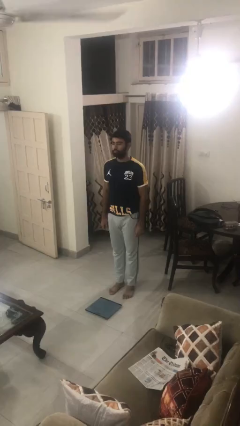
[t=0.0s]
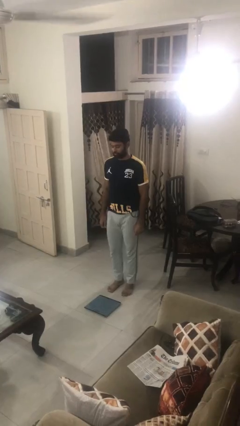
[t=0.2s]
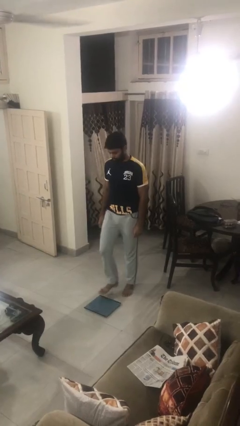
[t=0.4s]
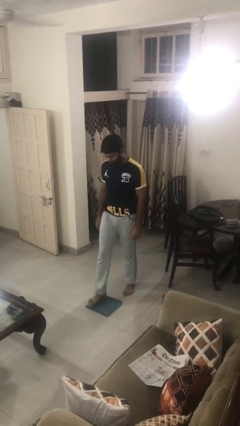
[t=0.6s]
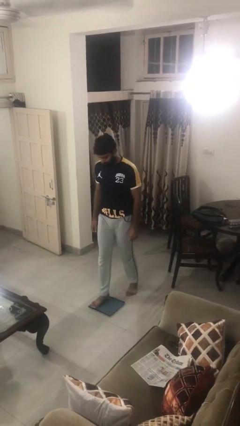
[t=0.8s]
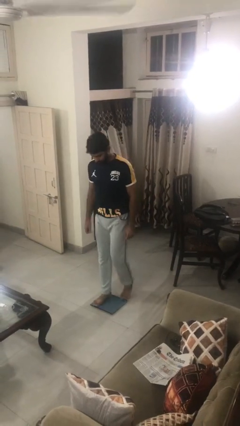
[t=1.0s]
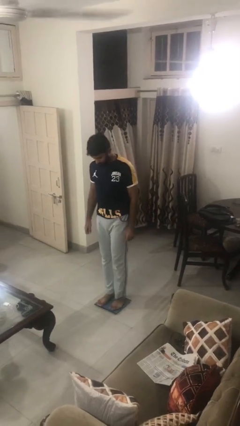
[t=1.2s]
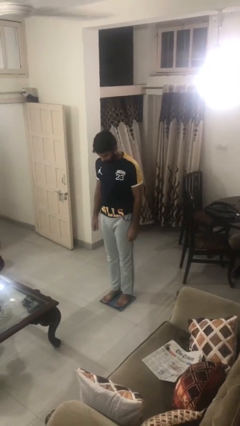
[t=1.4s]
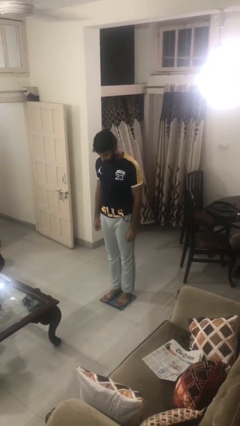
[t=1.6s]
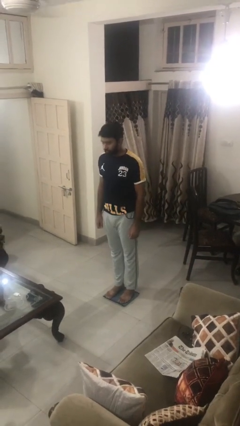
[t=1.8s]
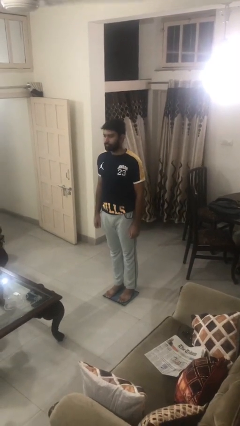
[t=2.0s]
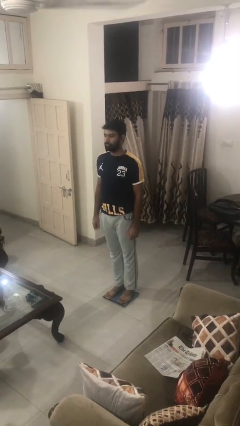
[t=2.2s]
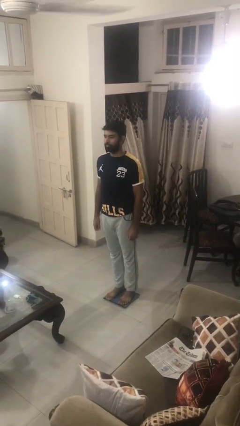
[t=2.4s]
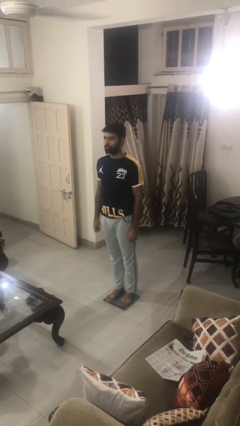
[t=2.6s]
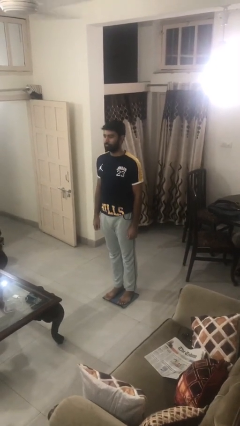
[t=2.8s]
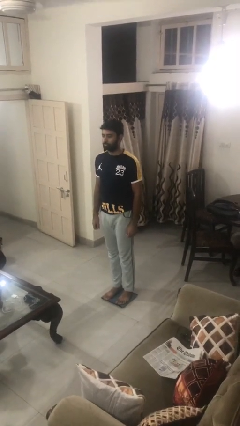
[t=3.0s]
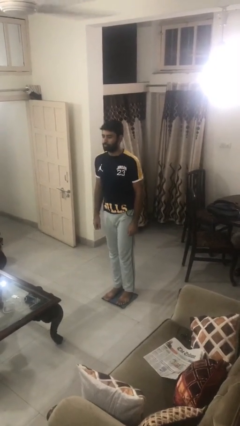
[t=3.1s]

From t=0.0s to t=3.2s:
person uses bodyweight scale

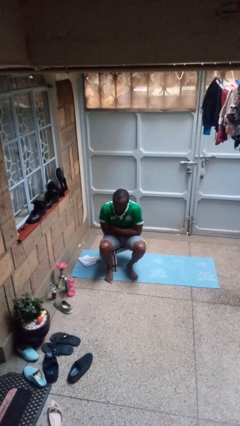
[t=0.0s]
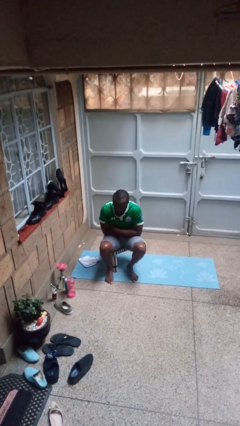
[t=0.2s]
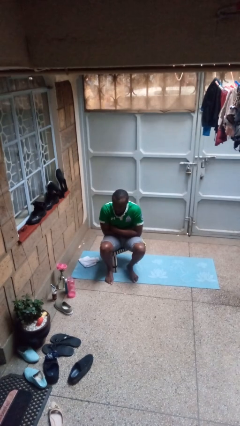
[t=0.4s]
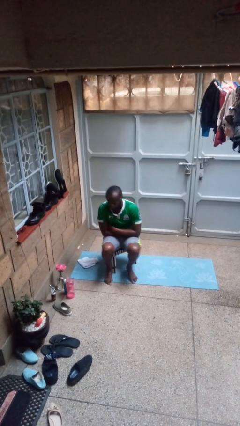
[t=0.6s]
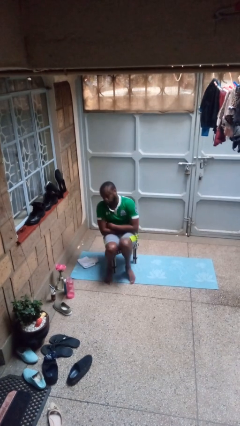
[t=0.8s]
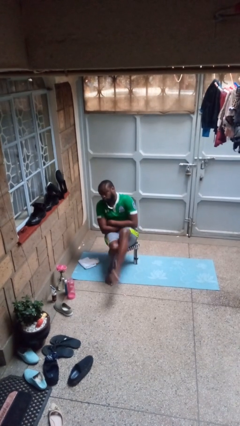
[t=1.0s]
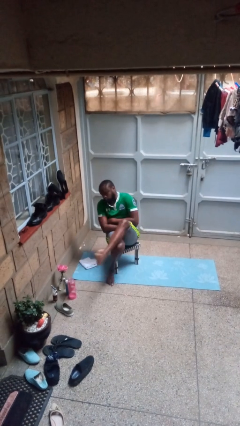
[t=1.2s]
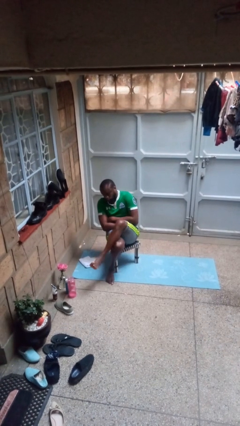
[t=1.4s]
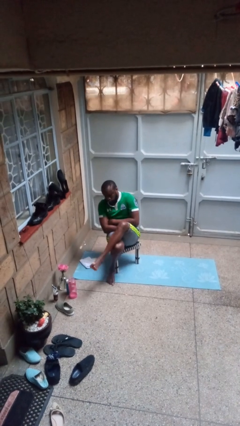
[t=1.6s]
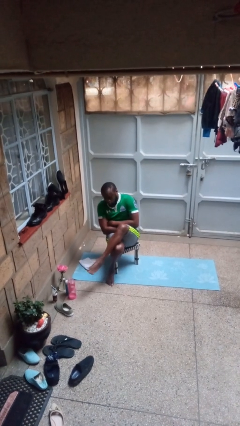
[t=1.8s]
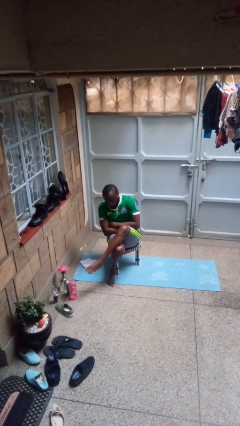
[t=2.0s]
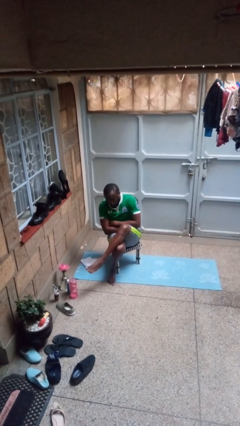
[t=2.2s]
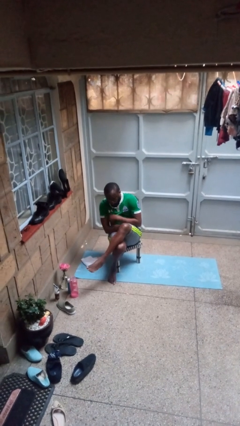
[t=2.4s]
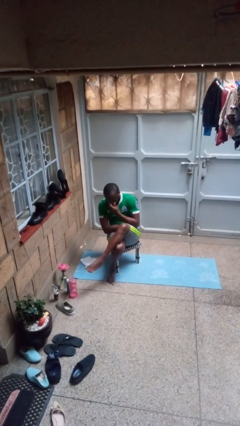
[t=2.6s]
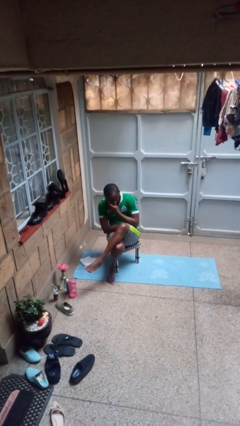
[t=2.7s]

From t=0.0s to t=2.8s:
person crosses legs

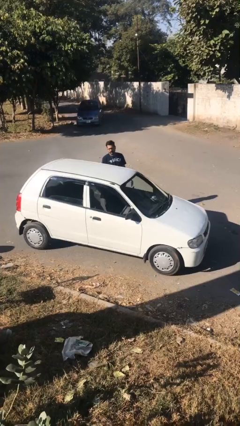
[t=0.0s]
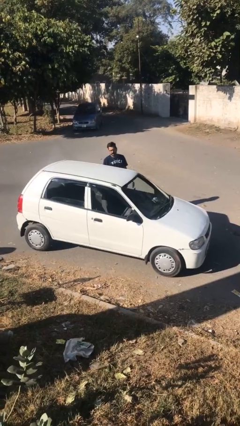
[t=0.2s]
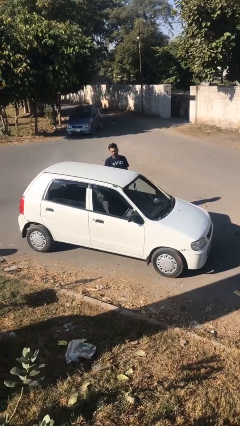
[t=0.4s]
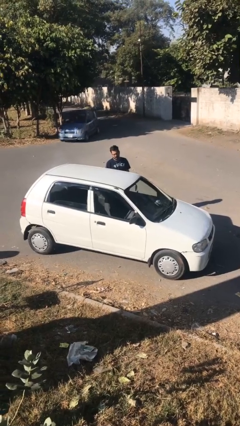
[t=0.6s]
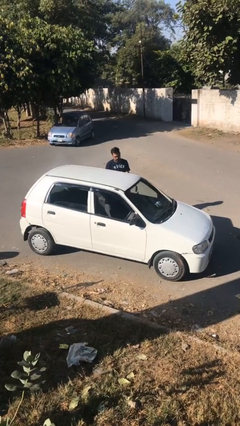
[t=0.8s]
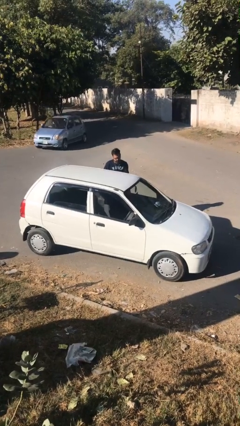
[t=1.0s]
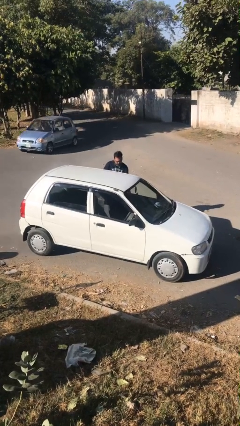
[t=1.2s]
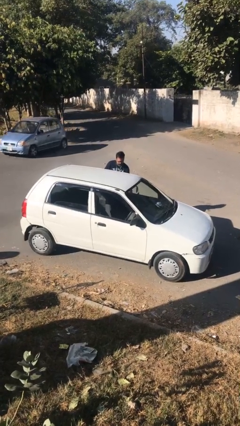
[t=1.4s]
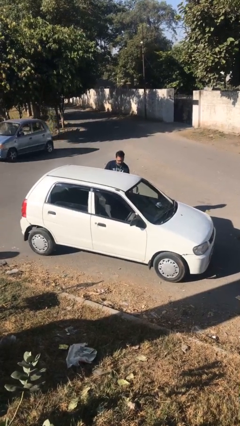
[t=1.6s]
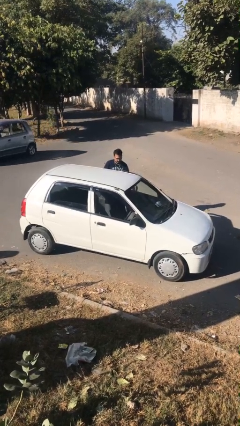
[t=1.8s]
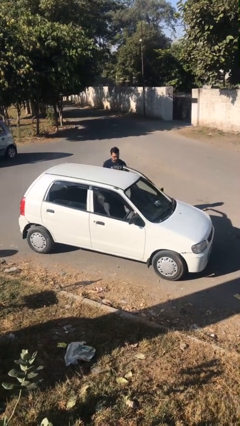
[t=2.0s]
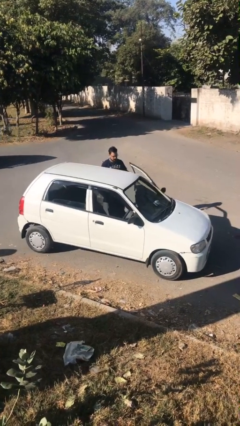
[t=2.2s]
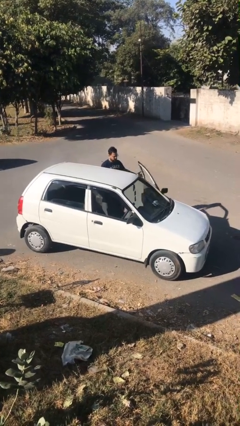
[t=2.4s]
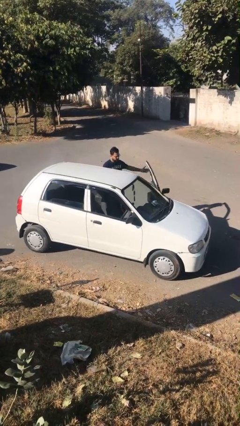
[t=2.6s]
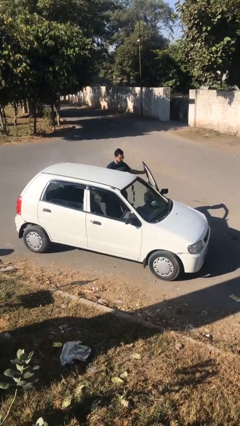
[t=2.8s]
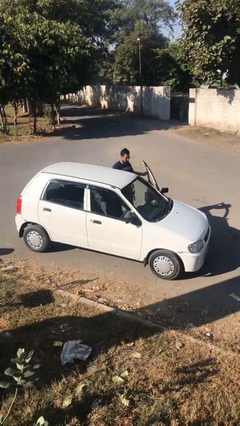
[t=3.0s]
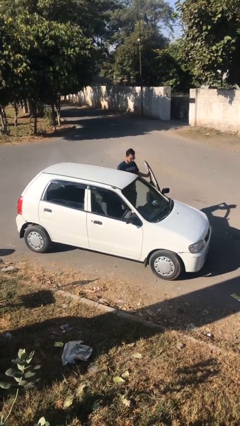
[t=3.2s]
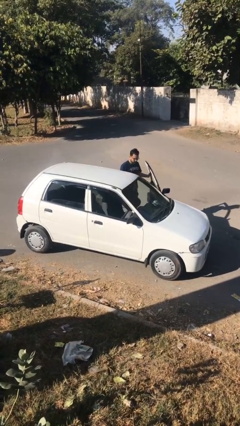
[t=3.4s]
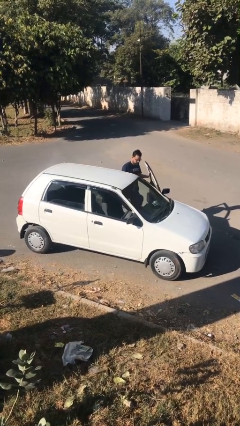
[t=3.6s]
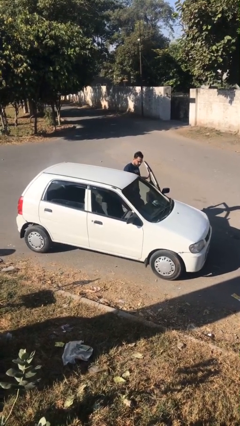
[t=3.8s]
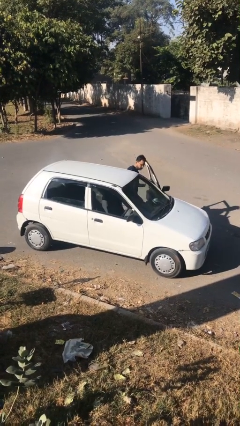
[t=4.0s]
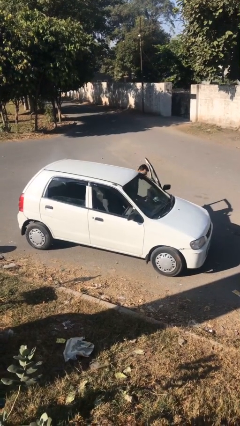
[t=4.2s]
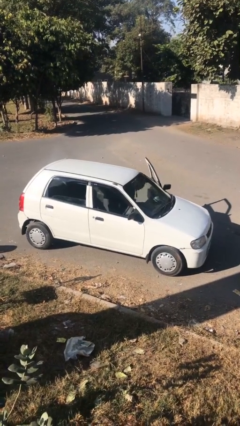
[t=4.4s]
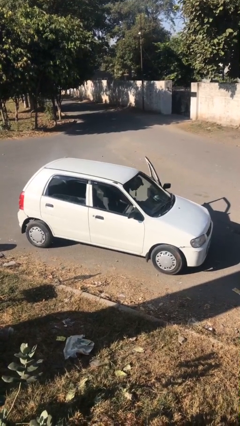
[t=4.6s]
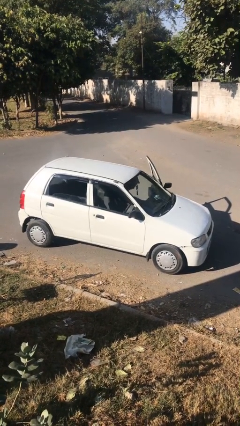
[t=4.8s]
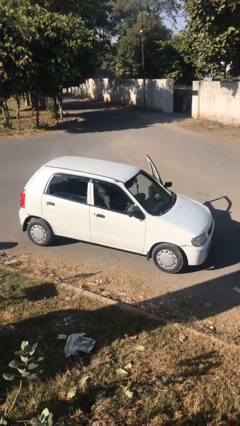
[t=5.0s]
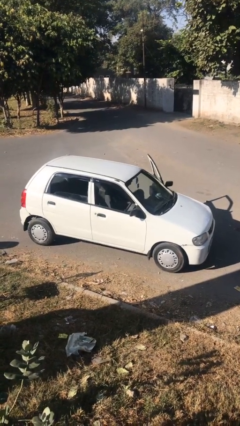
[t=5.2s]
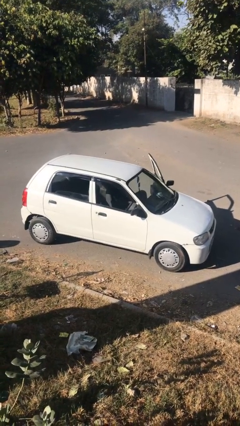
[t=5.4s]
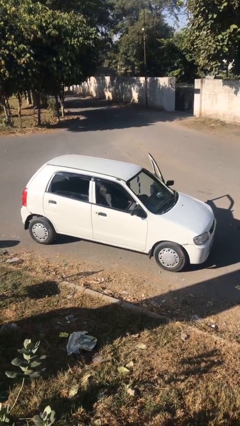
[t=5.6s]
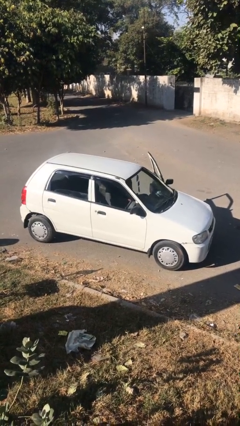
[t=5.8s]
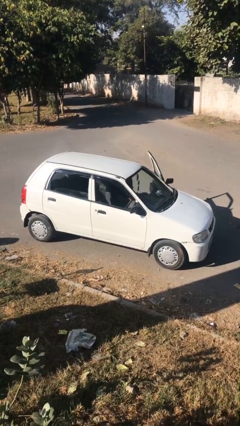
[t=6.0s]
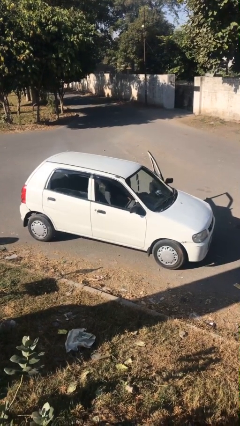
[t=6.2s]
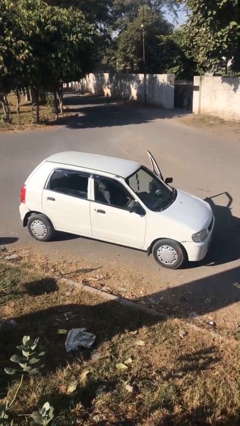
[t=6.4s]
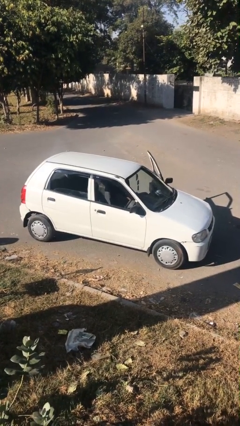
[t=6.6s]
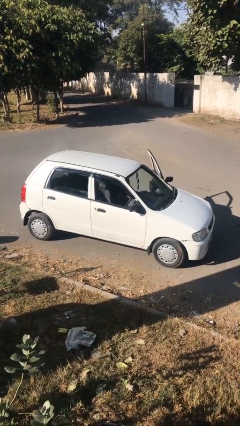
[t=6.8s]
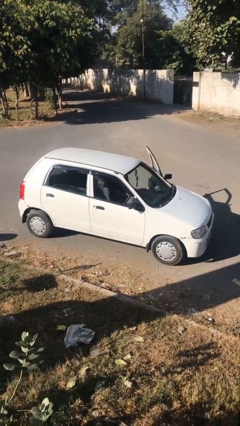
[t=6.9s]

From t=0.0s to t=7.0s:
car picks up person

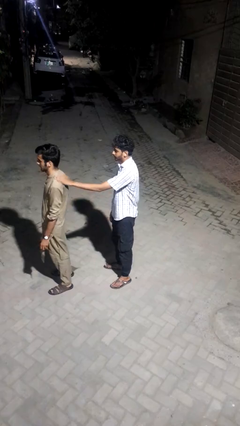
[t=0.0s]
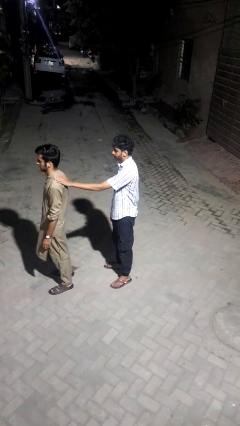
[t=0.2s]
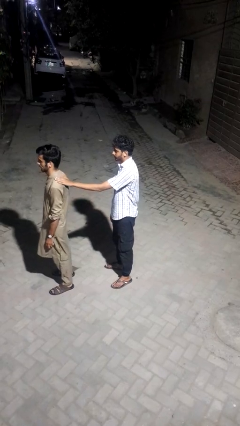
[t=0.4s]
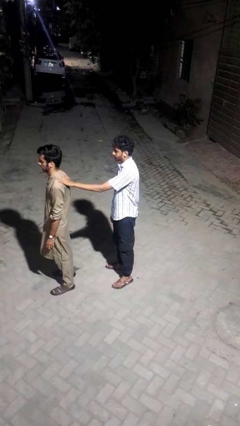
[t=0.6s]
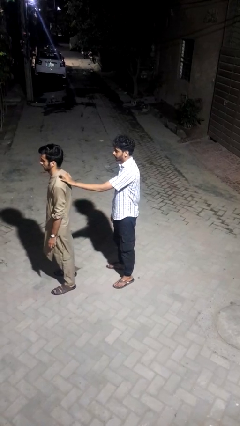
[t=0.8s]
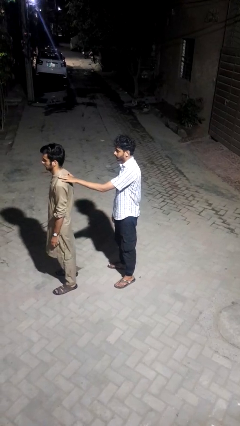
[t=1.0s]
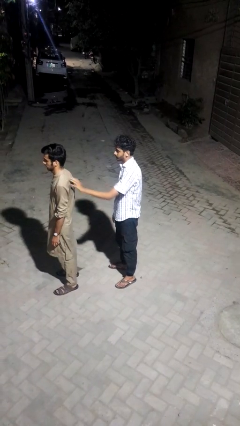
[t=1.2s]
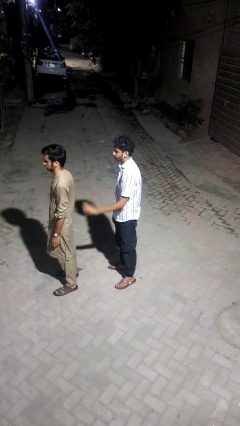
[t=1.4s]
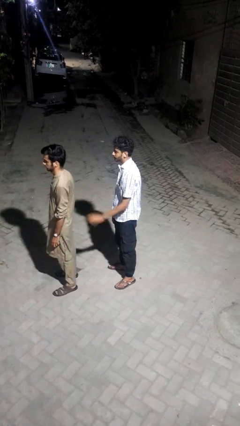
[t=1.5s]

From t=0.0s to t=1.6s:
person touches back of person

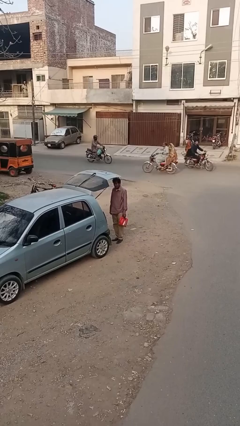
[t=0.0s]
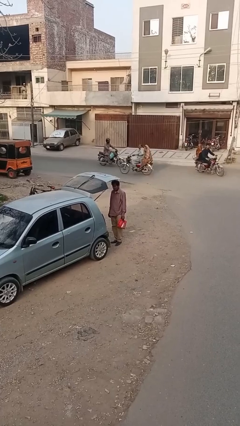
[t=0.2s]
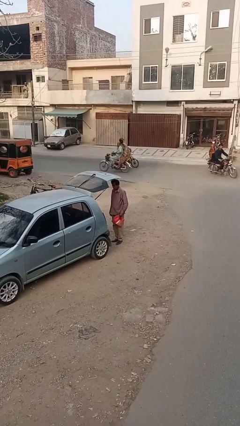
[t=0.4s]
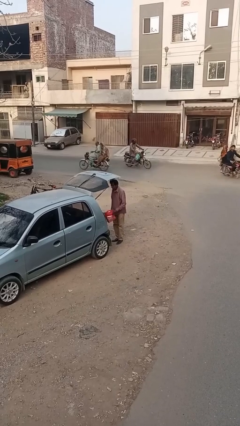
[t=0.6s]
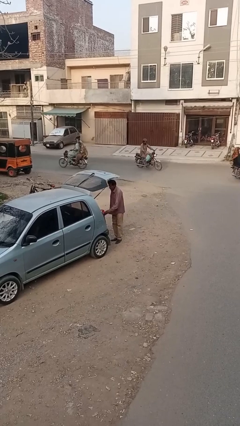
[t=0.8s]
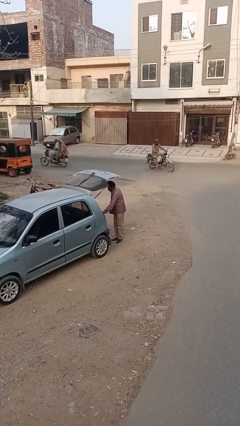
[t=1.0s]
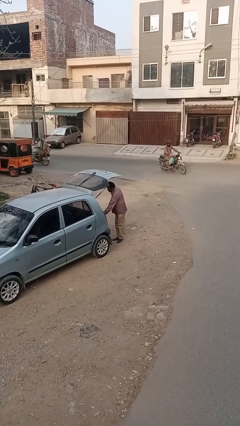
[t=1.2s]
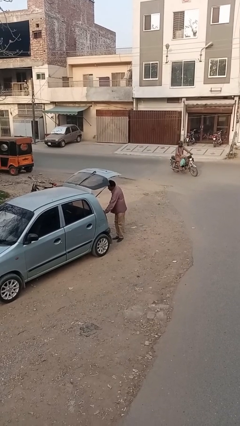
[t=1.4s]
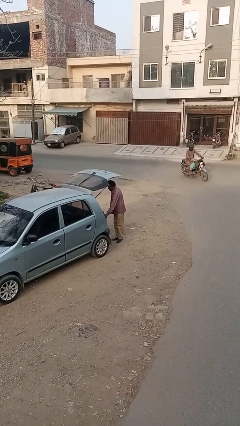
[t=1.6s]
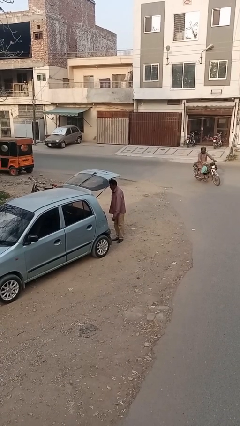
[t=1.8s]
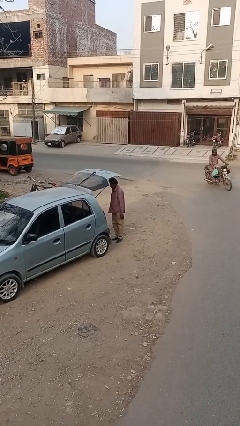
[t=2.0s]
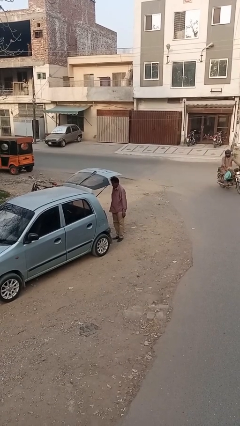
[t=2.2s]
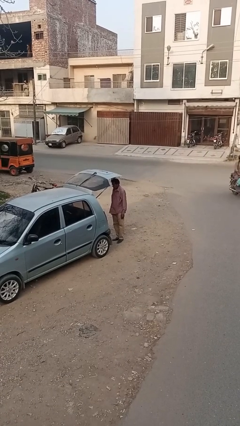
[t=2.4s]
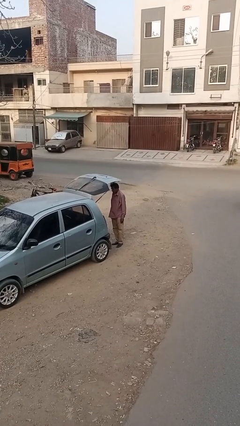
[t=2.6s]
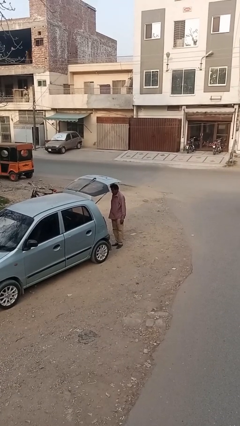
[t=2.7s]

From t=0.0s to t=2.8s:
person loads car
